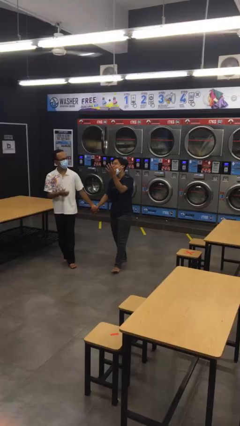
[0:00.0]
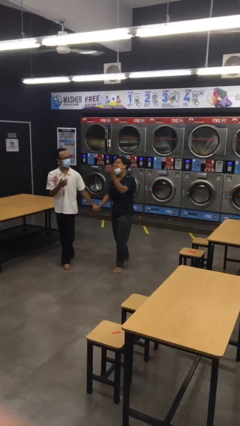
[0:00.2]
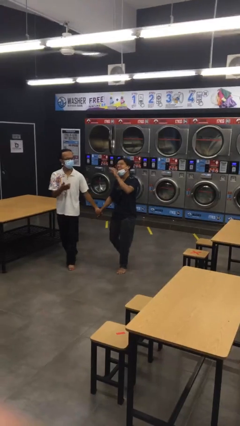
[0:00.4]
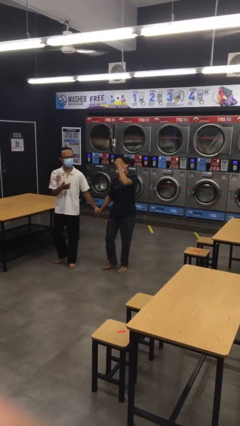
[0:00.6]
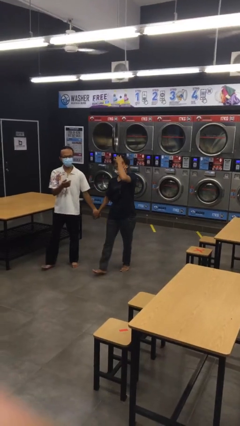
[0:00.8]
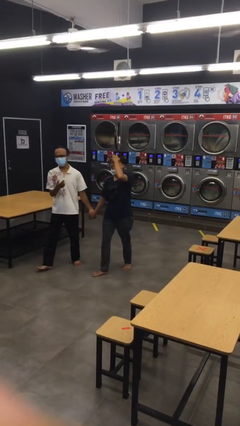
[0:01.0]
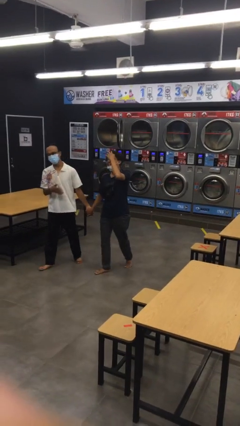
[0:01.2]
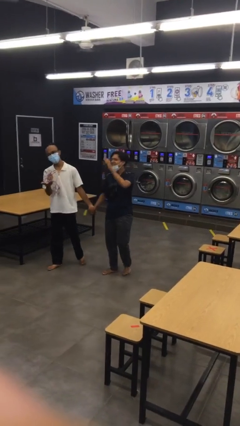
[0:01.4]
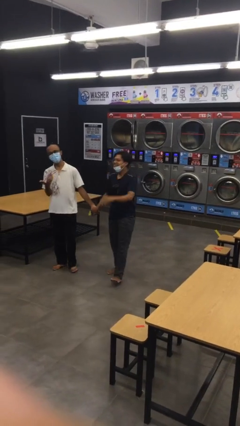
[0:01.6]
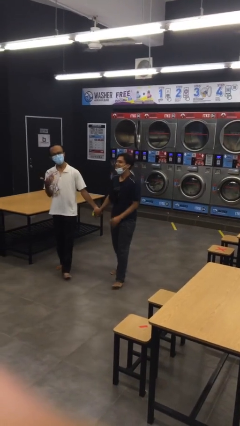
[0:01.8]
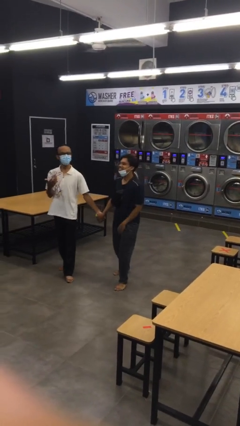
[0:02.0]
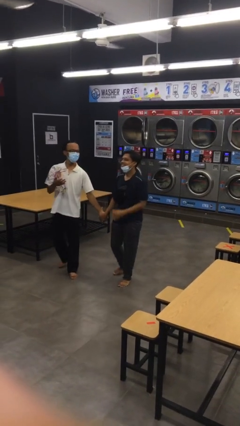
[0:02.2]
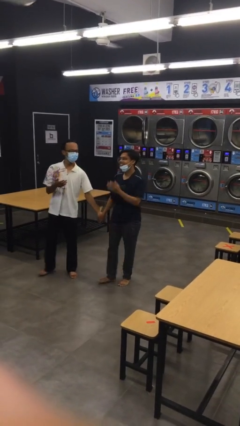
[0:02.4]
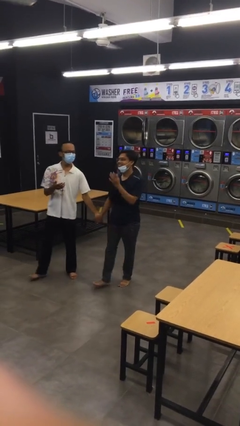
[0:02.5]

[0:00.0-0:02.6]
person holds hand

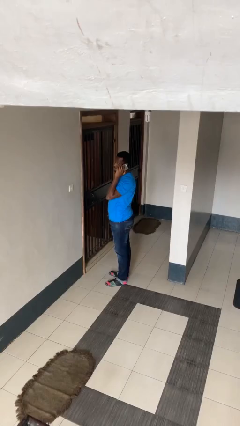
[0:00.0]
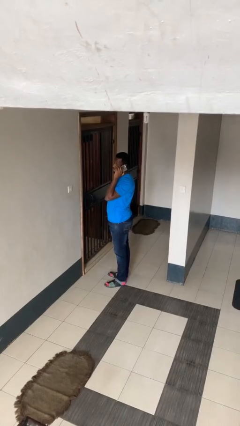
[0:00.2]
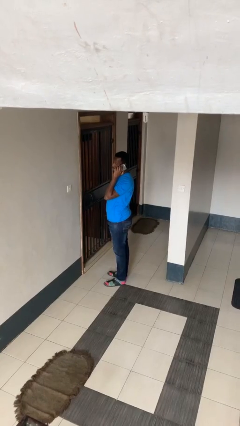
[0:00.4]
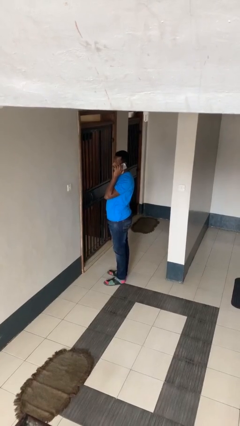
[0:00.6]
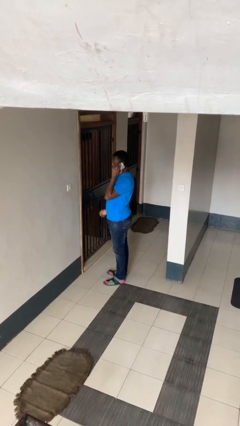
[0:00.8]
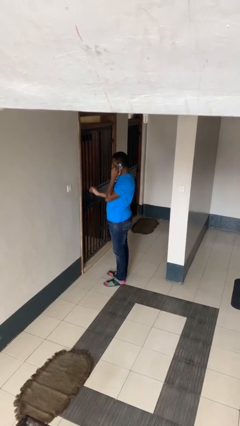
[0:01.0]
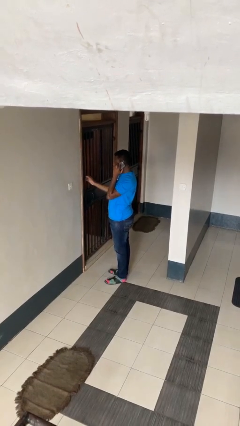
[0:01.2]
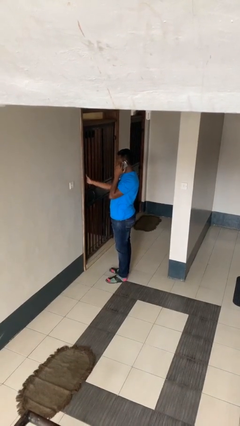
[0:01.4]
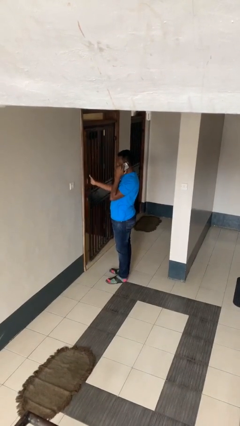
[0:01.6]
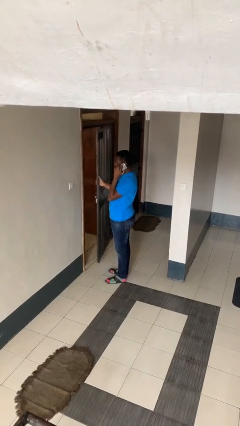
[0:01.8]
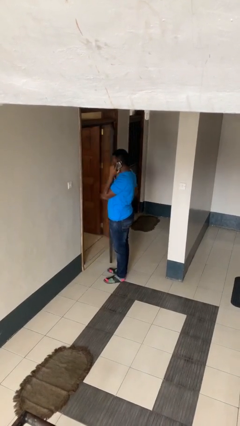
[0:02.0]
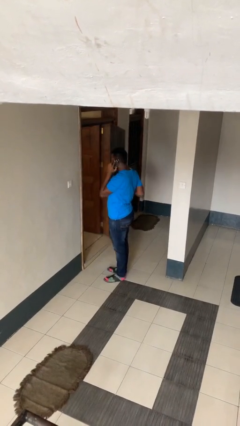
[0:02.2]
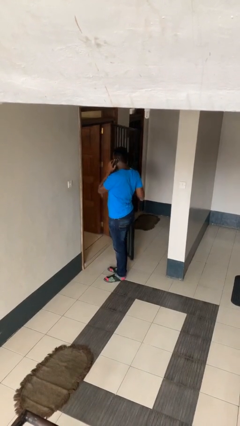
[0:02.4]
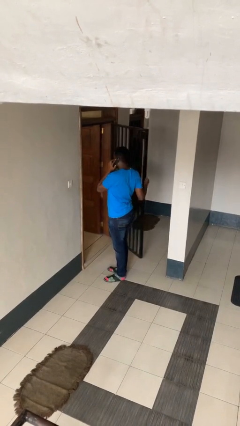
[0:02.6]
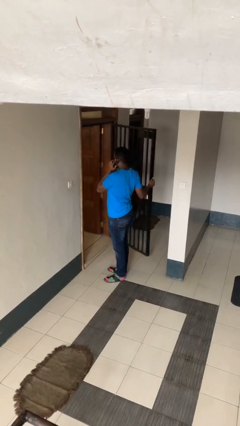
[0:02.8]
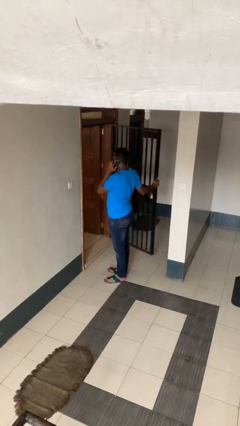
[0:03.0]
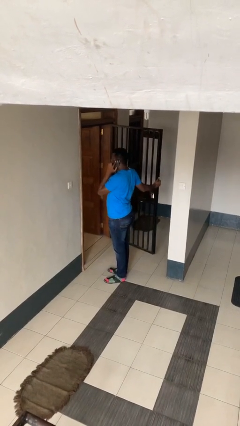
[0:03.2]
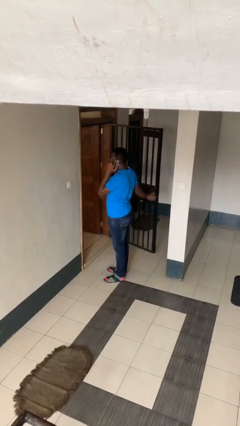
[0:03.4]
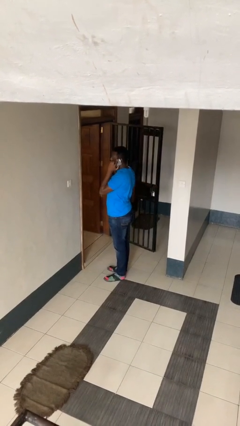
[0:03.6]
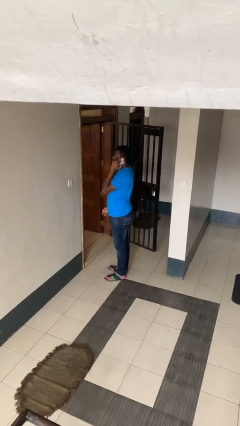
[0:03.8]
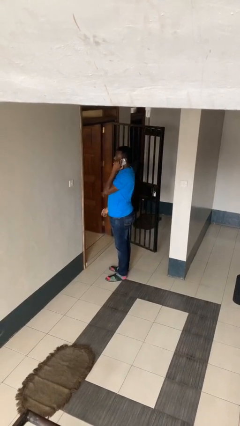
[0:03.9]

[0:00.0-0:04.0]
person opens facility door

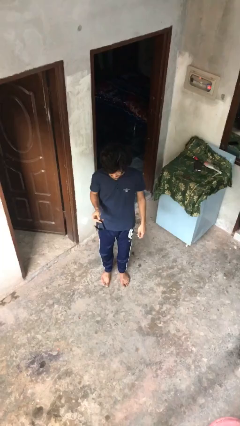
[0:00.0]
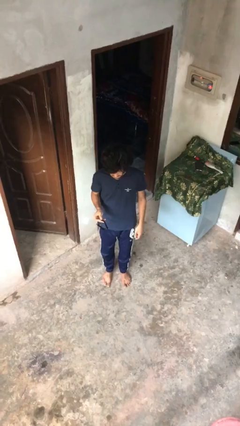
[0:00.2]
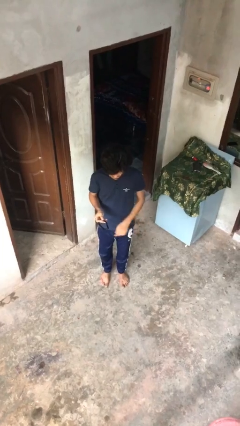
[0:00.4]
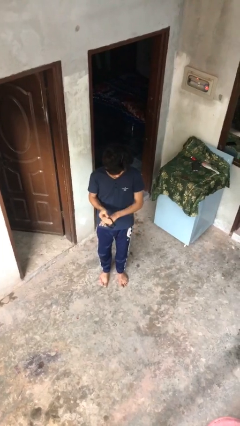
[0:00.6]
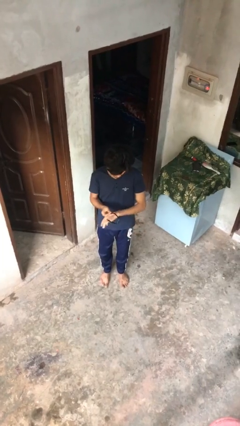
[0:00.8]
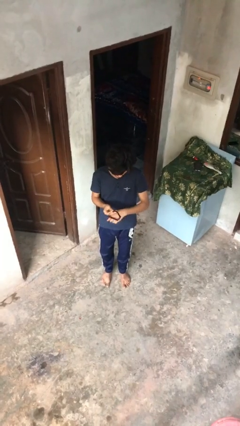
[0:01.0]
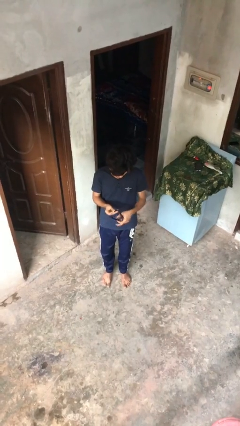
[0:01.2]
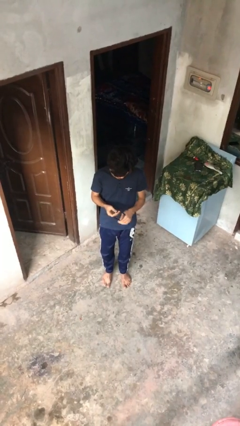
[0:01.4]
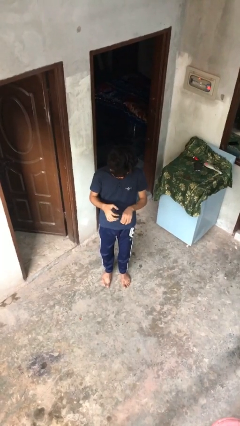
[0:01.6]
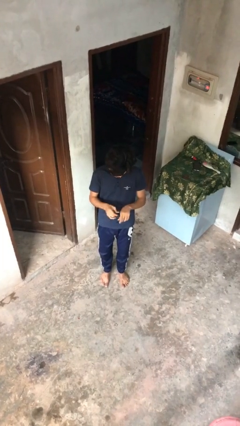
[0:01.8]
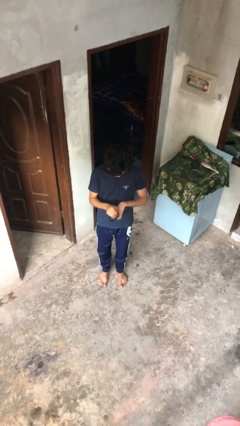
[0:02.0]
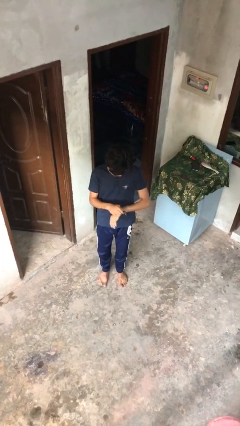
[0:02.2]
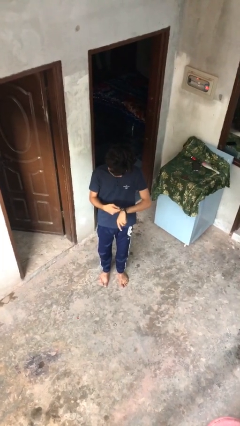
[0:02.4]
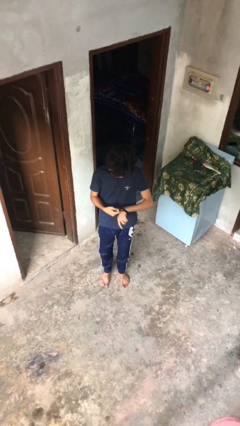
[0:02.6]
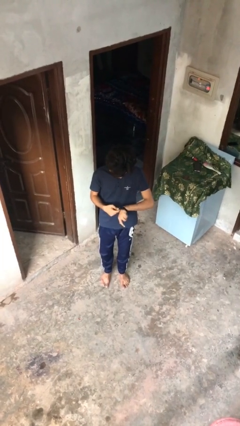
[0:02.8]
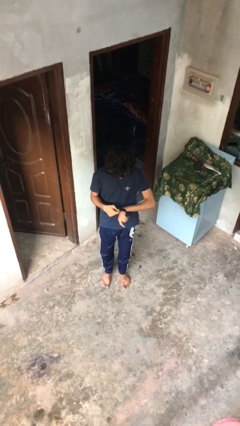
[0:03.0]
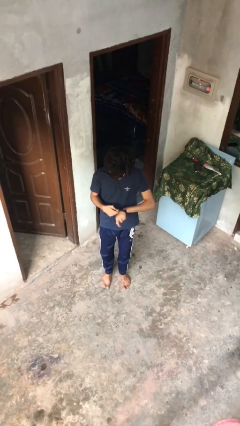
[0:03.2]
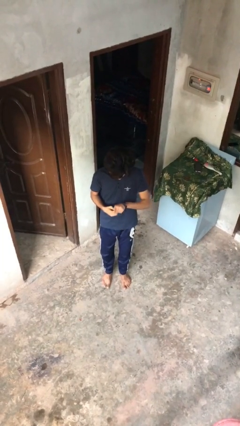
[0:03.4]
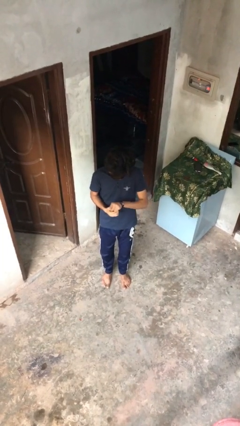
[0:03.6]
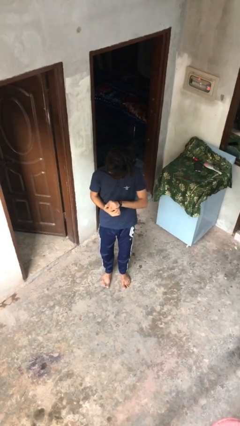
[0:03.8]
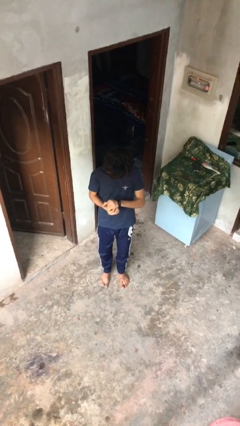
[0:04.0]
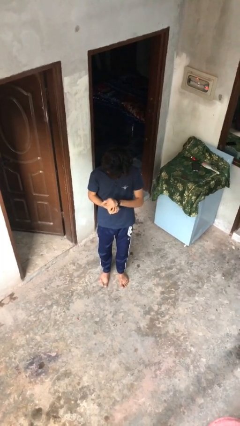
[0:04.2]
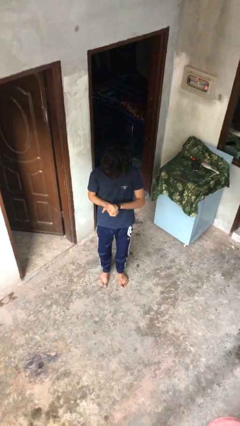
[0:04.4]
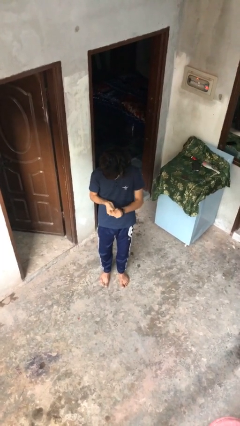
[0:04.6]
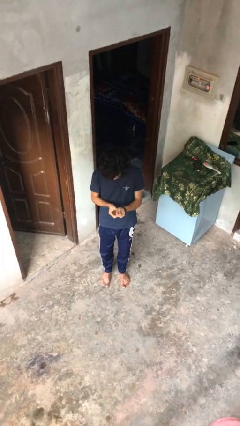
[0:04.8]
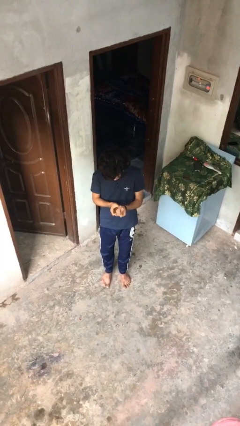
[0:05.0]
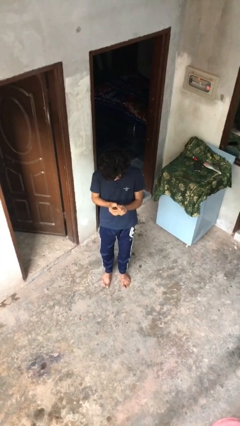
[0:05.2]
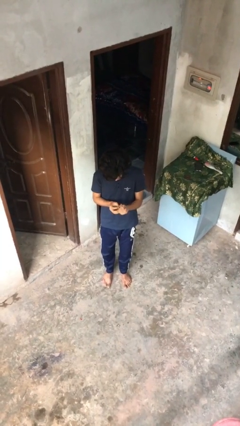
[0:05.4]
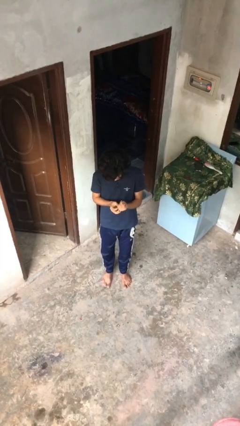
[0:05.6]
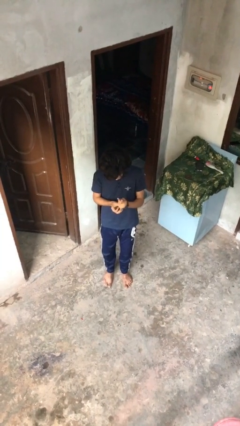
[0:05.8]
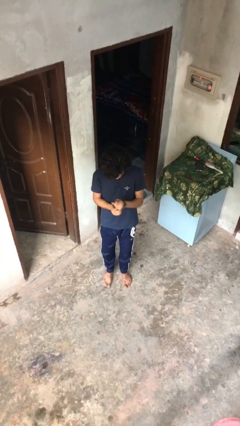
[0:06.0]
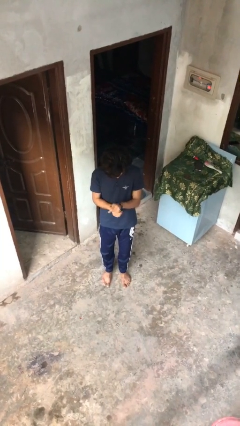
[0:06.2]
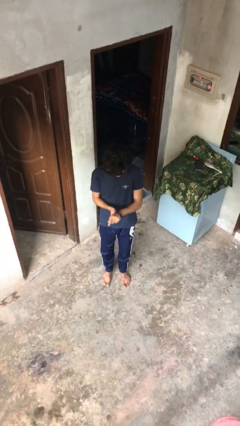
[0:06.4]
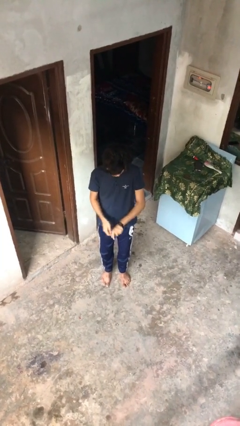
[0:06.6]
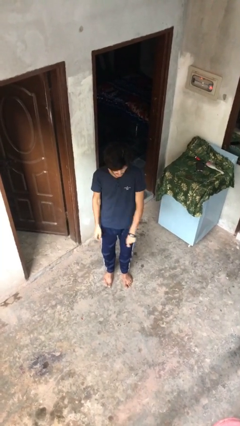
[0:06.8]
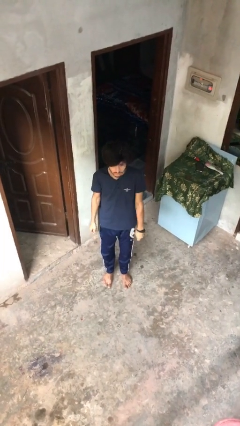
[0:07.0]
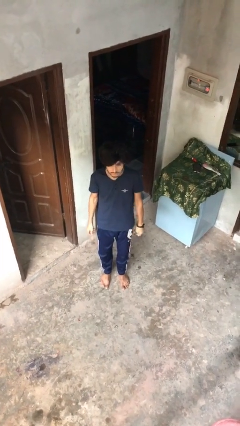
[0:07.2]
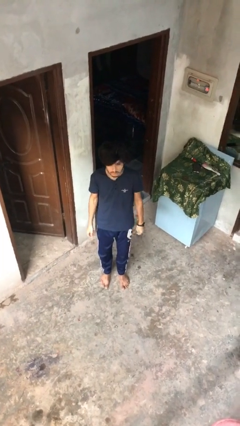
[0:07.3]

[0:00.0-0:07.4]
person puts on wristwatch

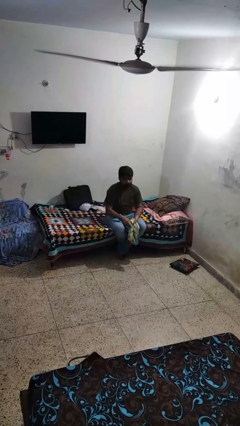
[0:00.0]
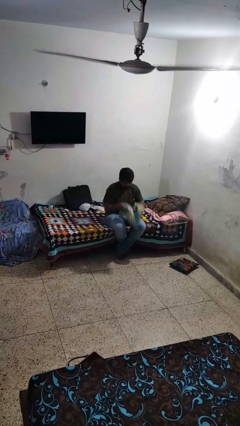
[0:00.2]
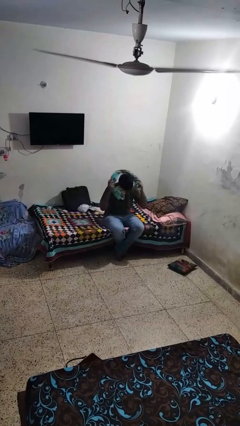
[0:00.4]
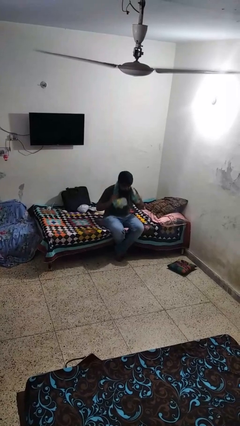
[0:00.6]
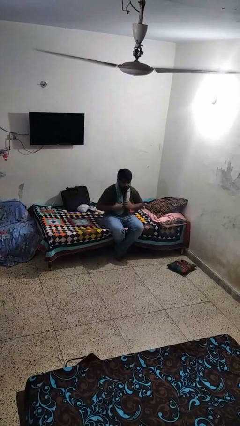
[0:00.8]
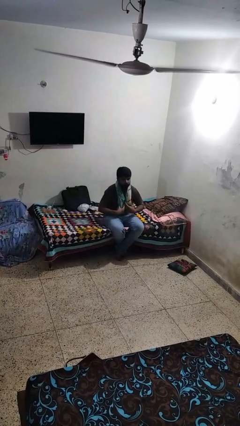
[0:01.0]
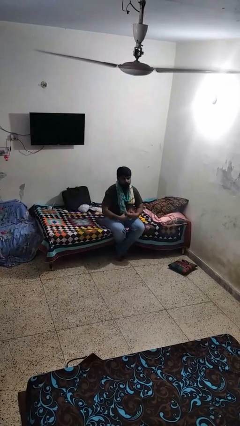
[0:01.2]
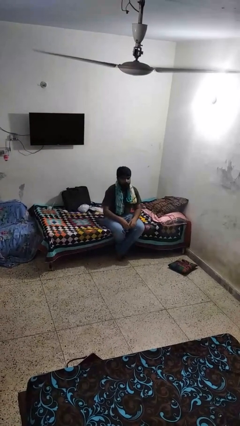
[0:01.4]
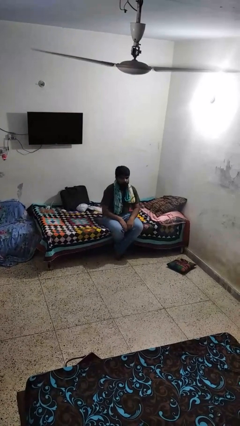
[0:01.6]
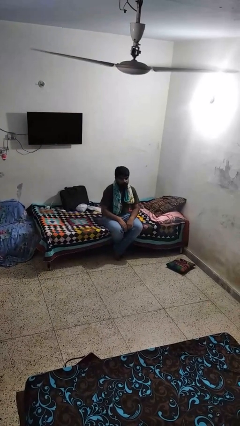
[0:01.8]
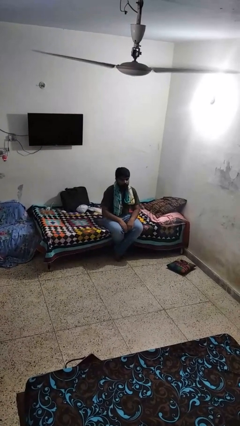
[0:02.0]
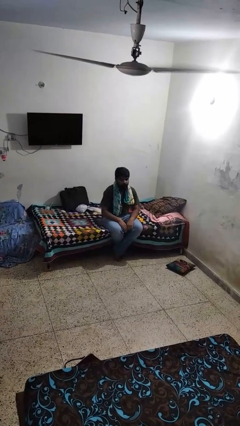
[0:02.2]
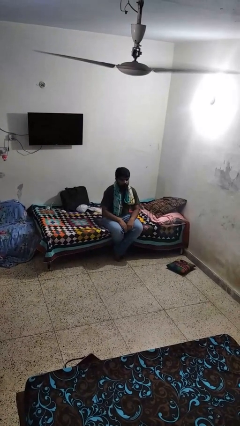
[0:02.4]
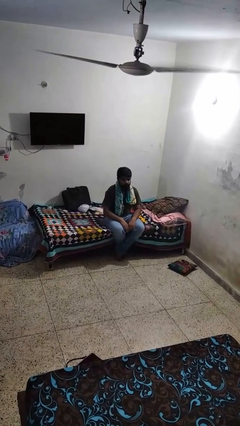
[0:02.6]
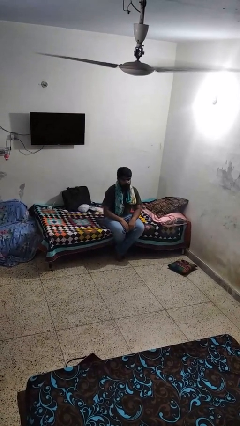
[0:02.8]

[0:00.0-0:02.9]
person puts on scarf

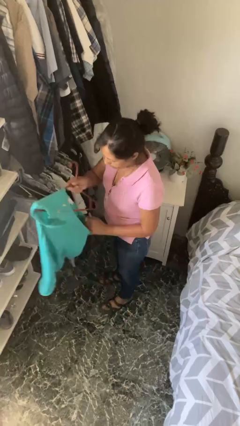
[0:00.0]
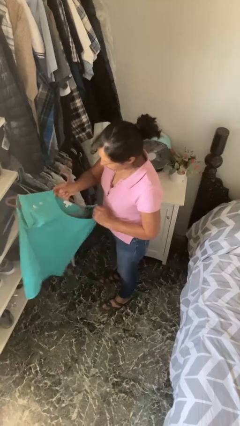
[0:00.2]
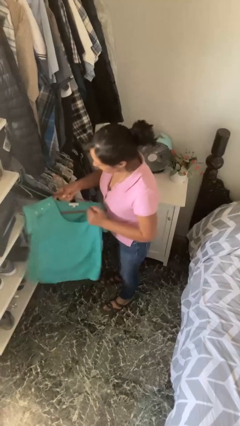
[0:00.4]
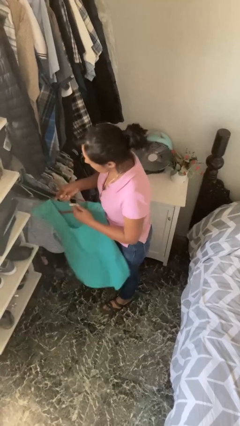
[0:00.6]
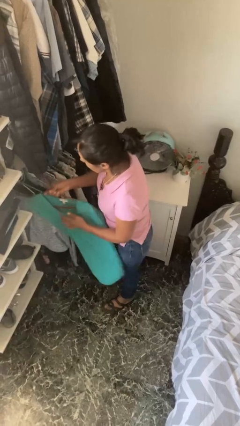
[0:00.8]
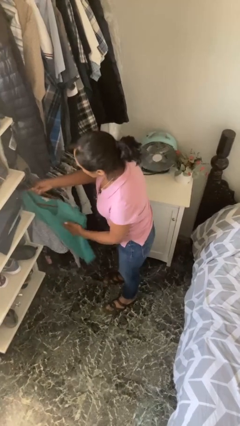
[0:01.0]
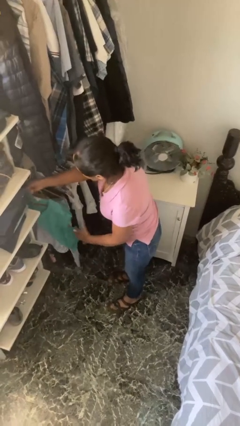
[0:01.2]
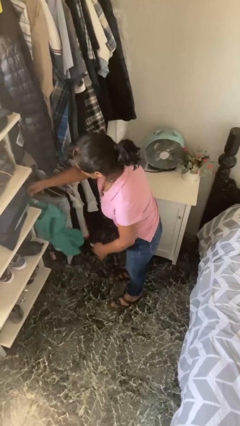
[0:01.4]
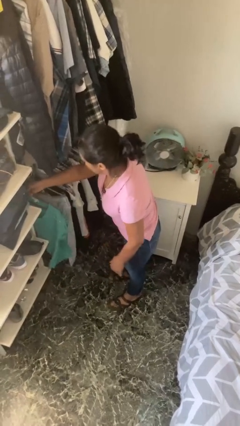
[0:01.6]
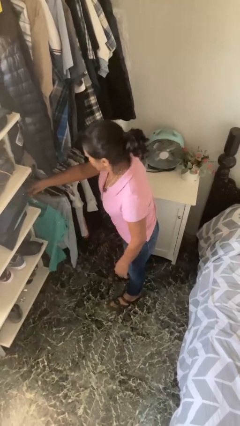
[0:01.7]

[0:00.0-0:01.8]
person puts clothes into closet
